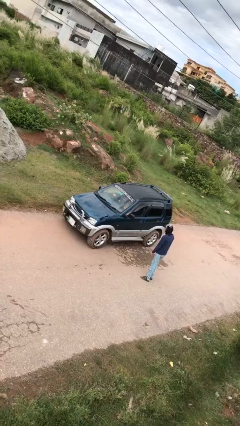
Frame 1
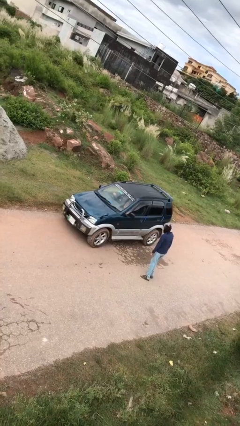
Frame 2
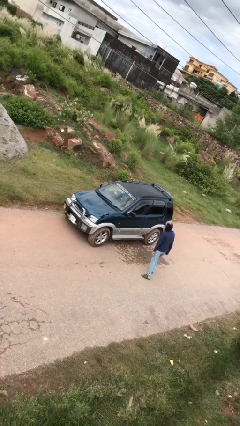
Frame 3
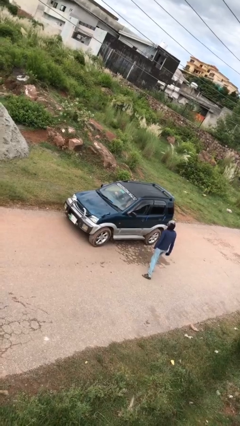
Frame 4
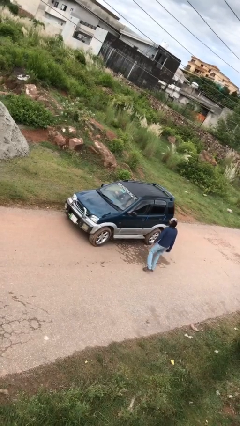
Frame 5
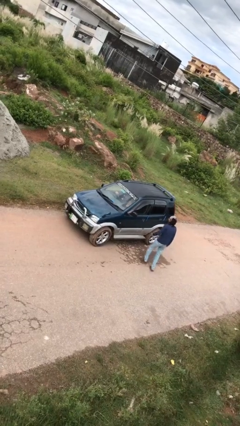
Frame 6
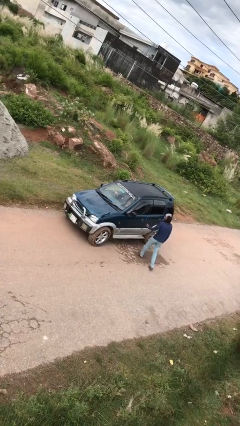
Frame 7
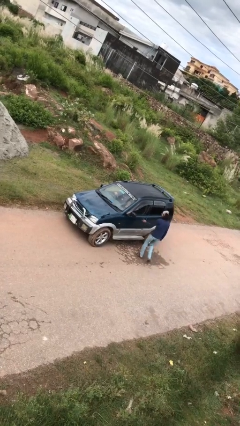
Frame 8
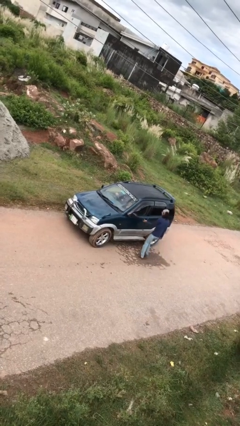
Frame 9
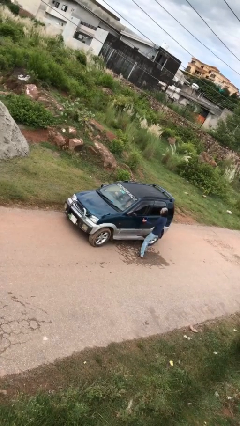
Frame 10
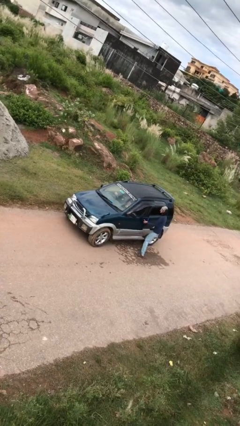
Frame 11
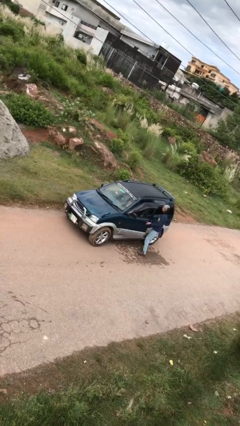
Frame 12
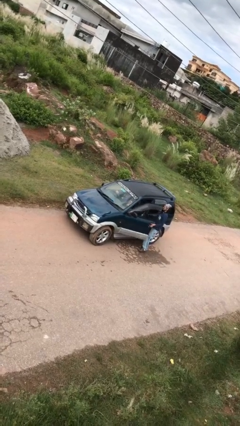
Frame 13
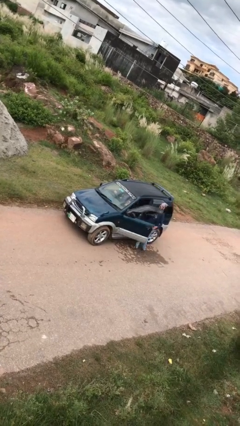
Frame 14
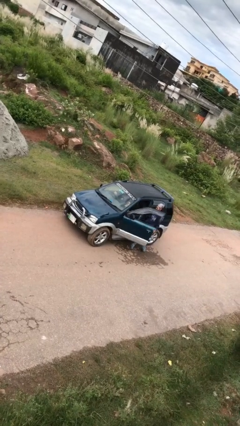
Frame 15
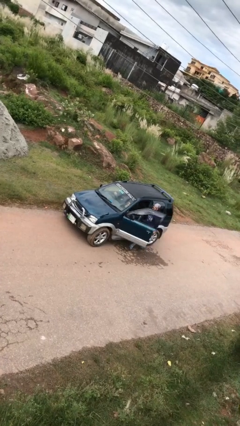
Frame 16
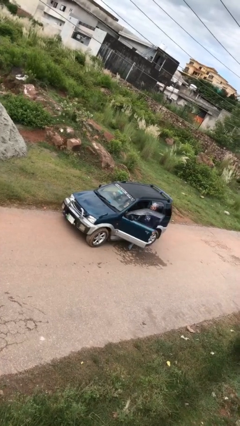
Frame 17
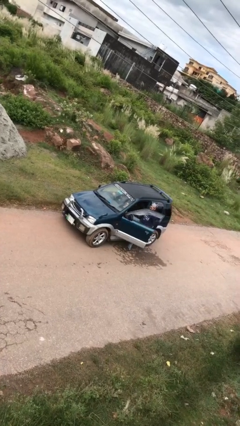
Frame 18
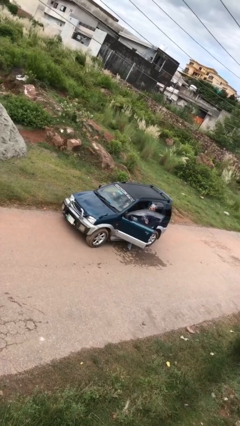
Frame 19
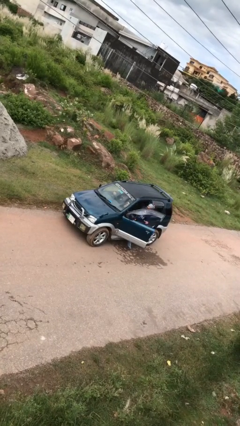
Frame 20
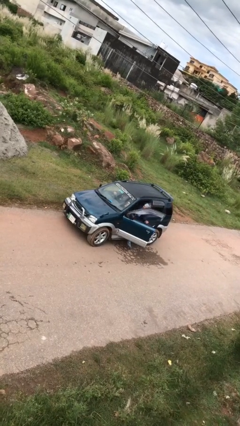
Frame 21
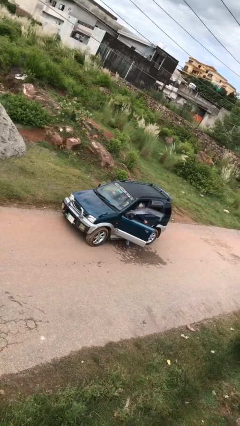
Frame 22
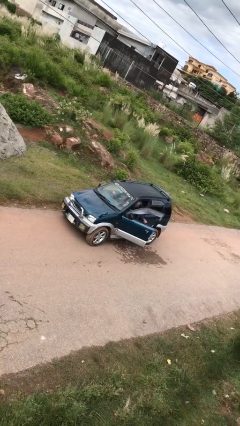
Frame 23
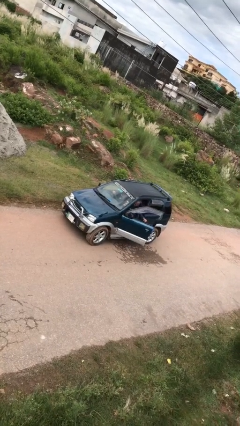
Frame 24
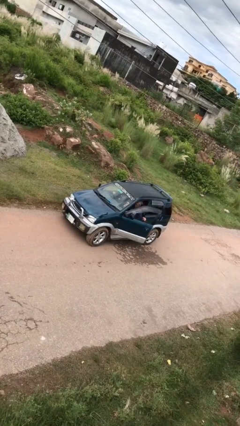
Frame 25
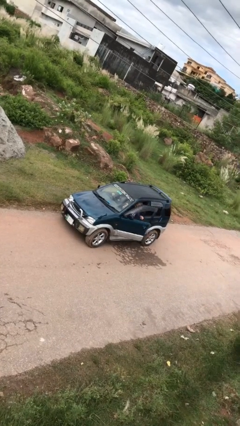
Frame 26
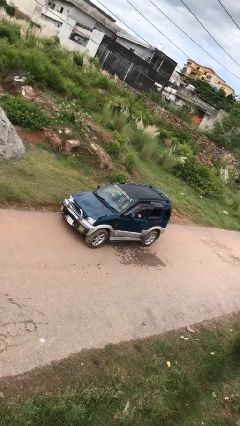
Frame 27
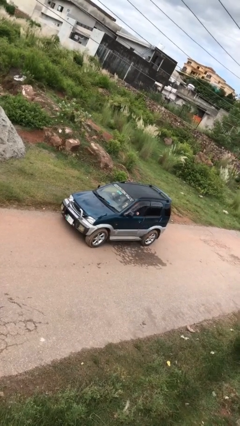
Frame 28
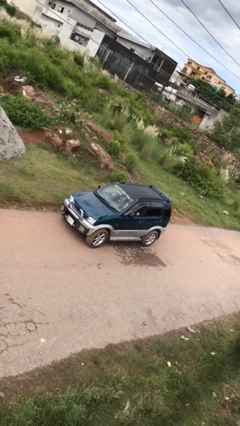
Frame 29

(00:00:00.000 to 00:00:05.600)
car picks up person

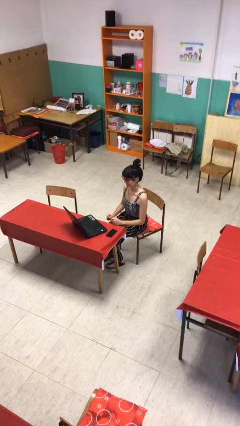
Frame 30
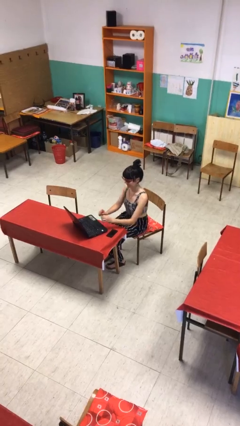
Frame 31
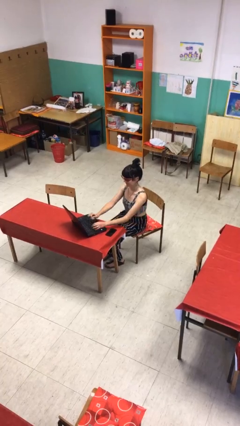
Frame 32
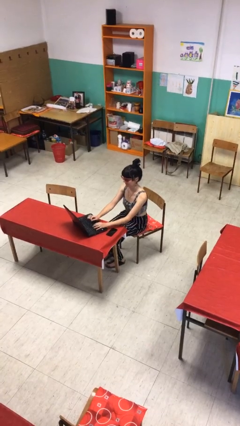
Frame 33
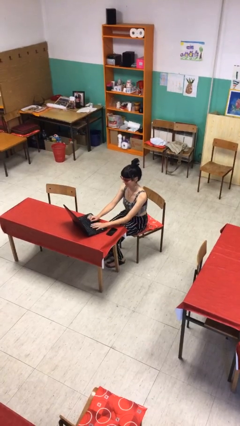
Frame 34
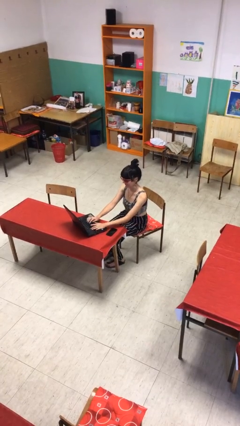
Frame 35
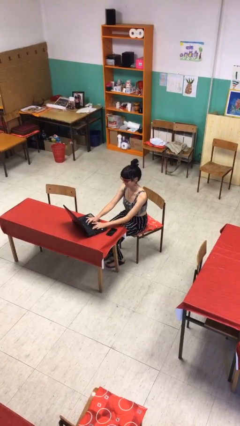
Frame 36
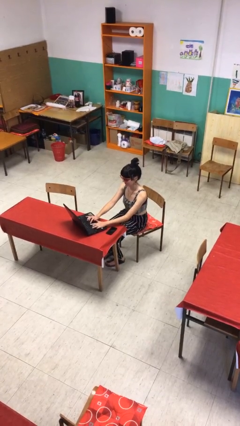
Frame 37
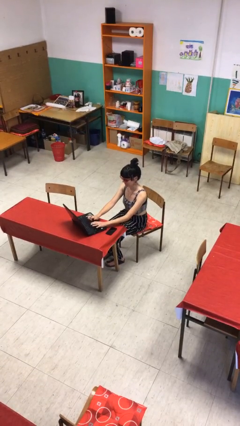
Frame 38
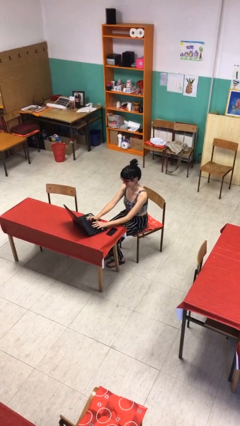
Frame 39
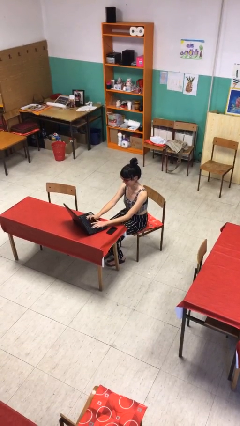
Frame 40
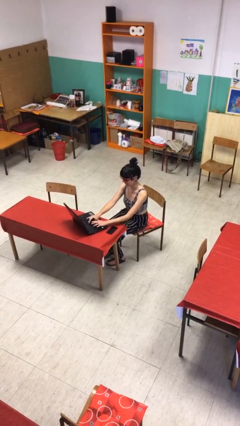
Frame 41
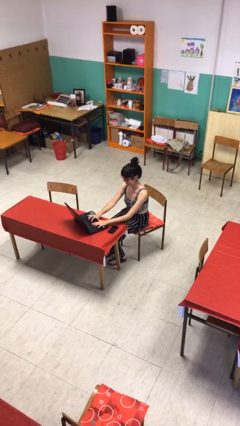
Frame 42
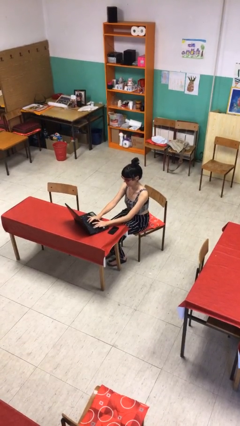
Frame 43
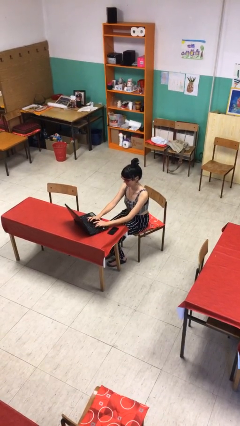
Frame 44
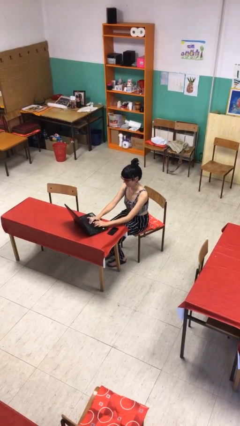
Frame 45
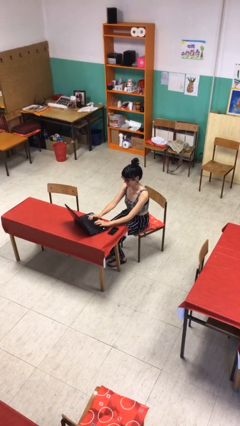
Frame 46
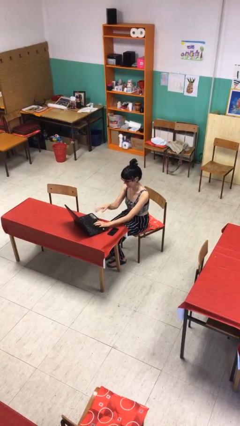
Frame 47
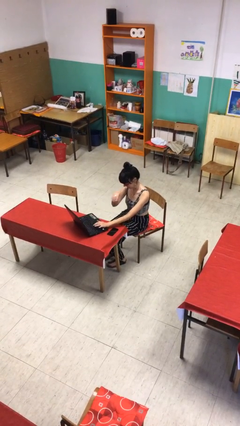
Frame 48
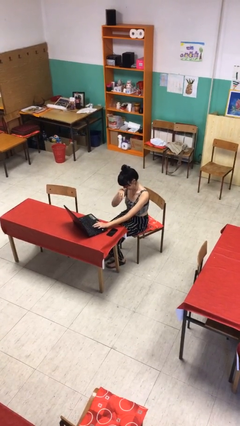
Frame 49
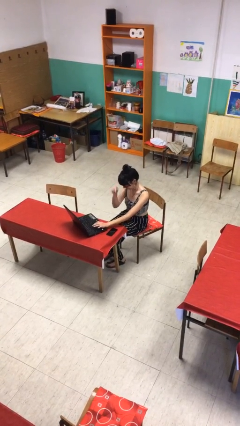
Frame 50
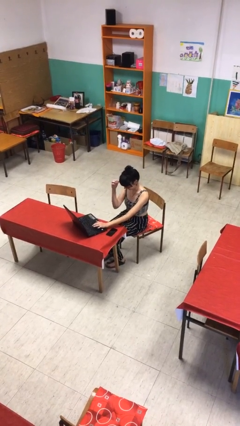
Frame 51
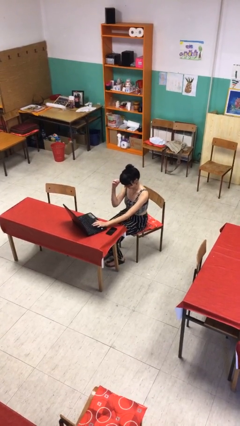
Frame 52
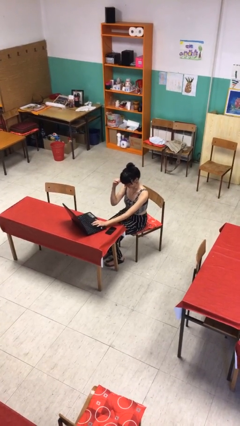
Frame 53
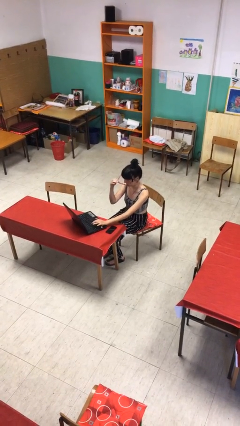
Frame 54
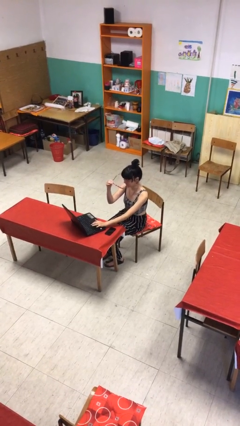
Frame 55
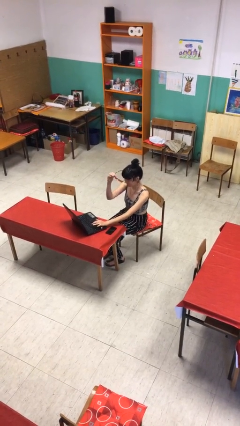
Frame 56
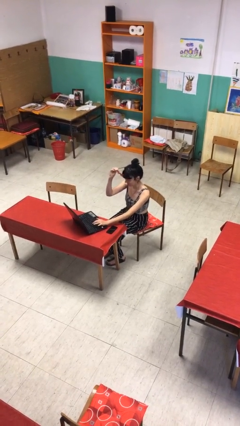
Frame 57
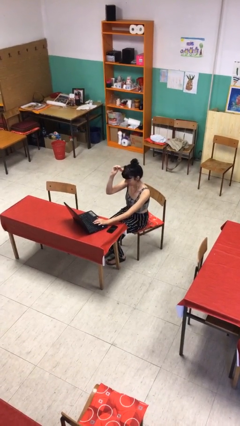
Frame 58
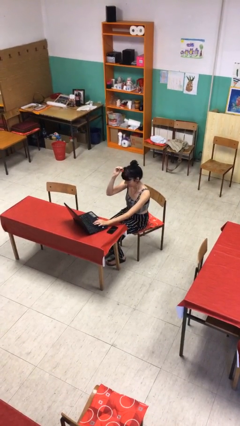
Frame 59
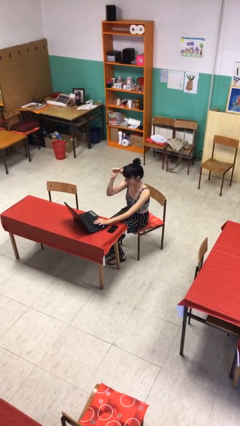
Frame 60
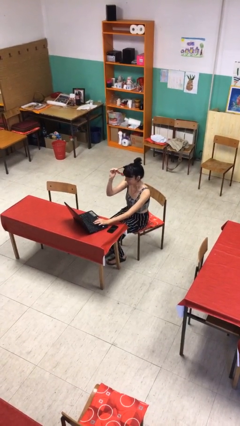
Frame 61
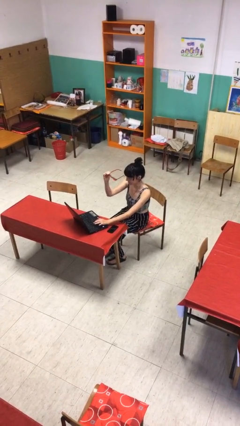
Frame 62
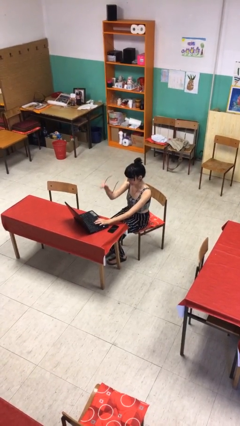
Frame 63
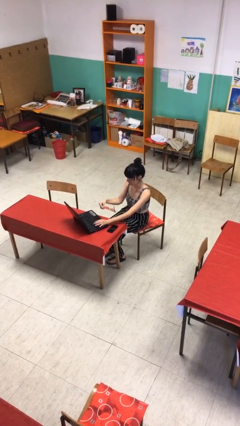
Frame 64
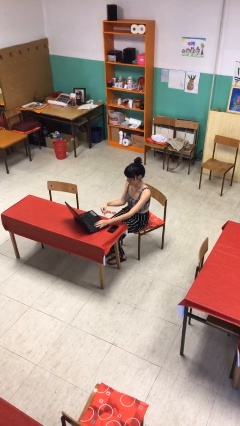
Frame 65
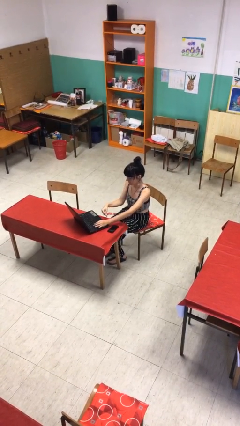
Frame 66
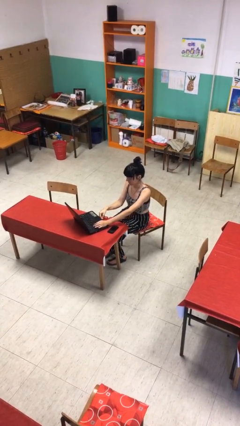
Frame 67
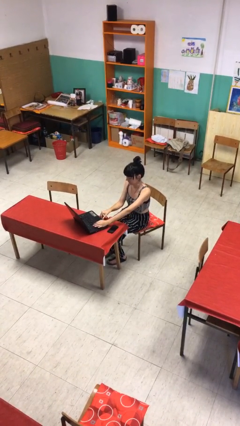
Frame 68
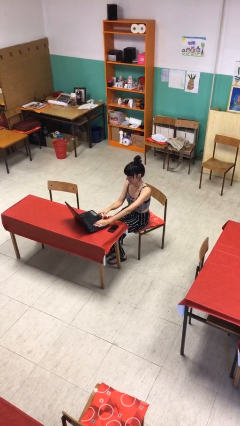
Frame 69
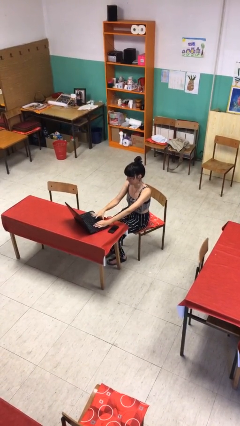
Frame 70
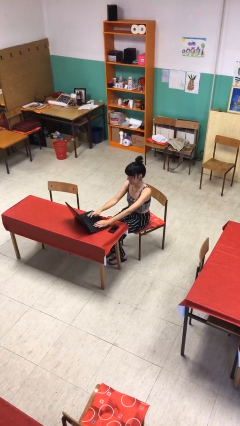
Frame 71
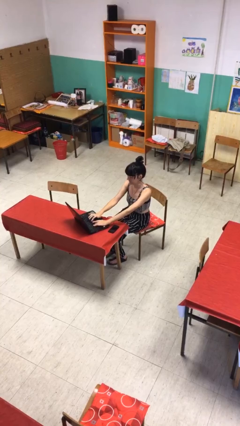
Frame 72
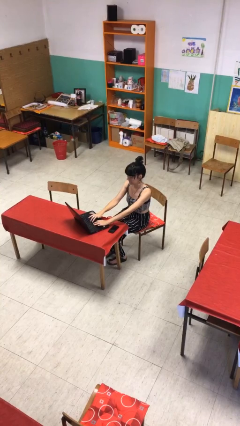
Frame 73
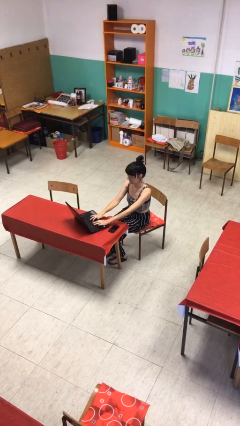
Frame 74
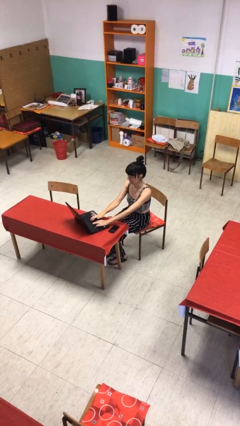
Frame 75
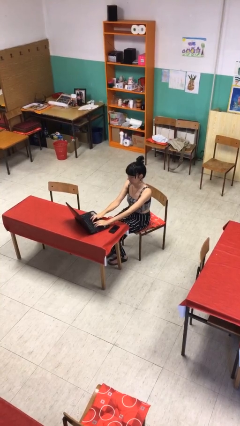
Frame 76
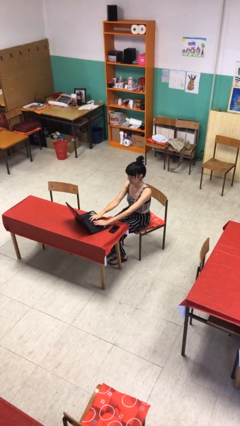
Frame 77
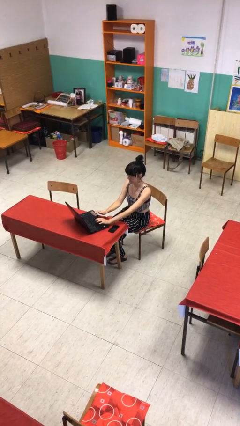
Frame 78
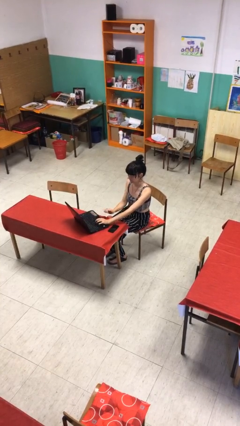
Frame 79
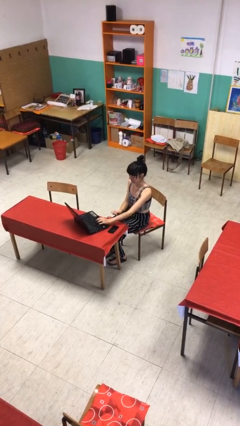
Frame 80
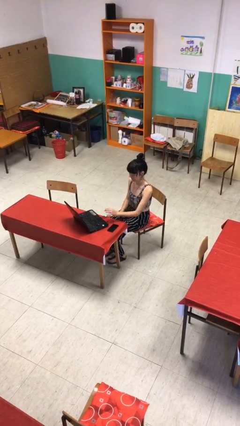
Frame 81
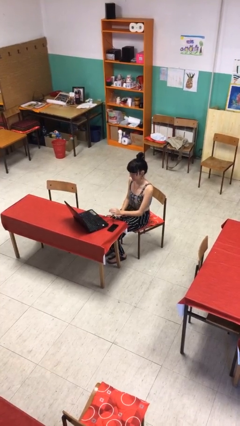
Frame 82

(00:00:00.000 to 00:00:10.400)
person interacts with laptop

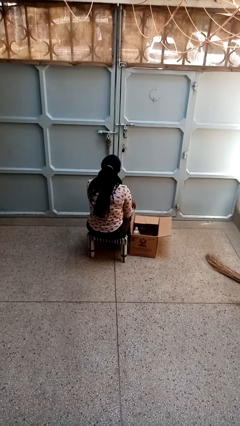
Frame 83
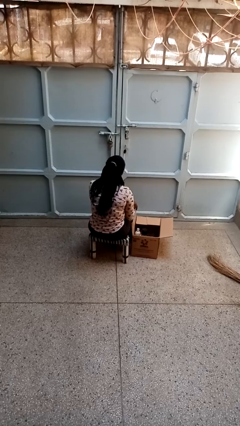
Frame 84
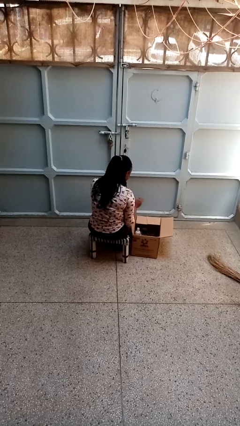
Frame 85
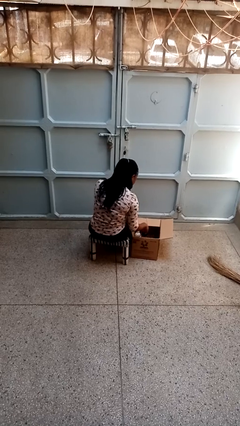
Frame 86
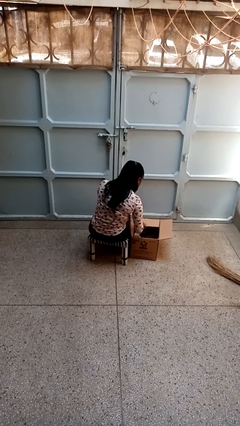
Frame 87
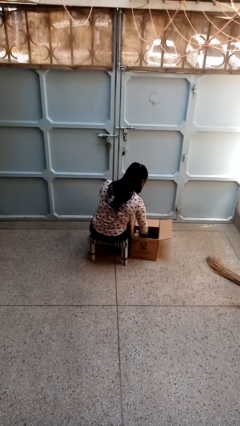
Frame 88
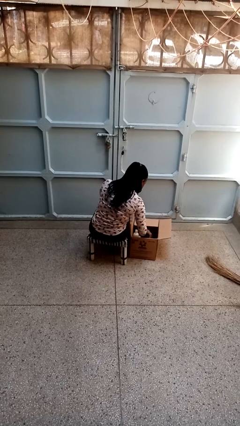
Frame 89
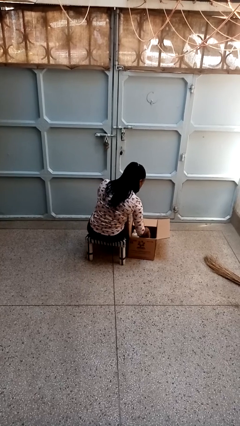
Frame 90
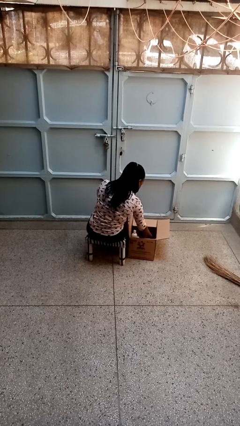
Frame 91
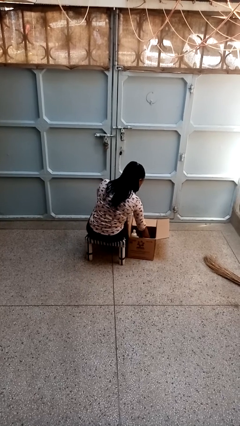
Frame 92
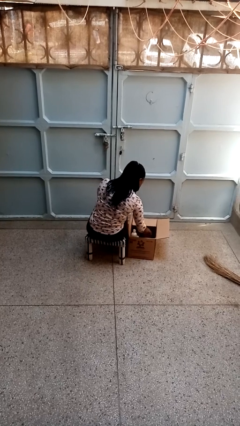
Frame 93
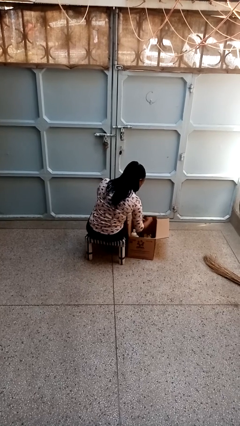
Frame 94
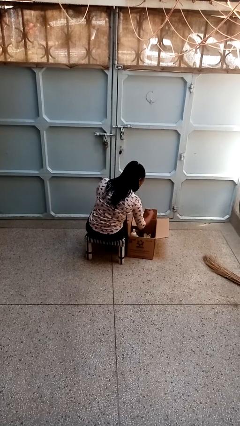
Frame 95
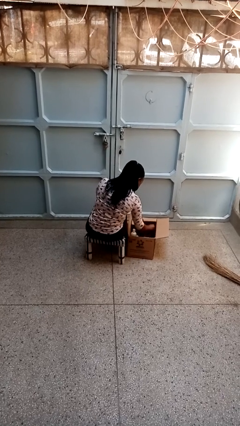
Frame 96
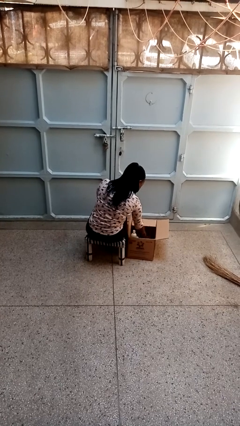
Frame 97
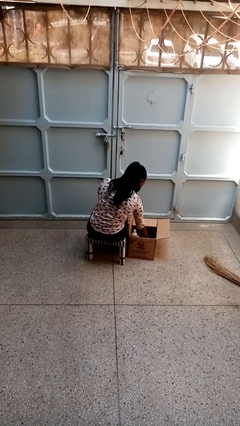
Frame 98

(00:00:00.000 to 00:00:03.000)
person searches in box
